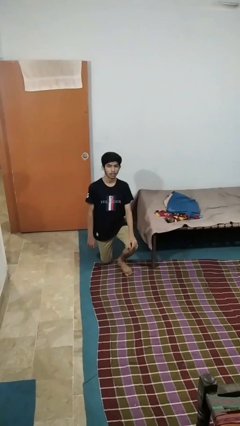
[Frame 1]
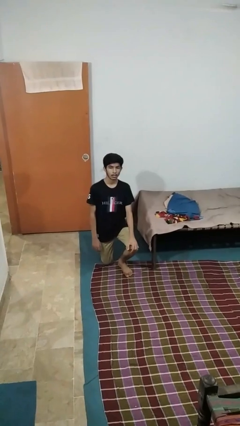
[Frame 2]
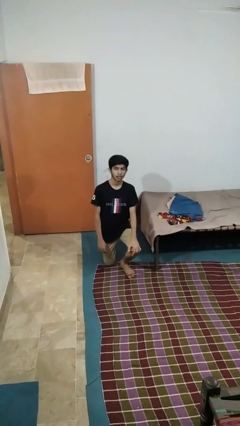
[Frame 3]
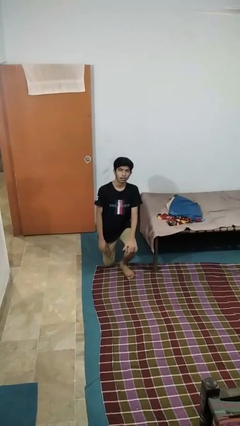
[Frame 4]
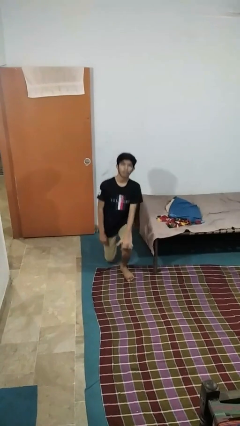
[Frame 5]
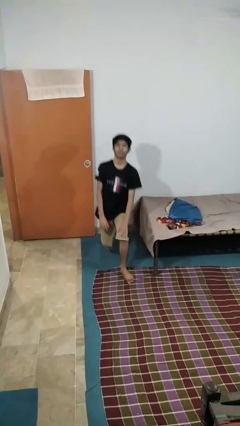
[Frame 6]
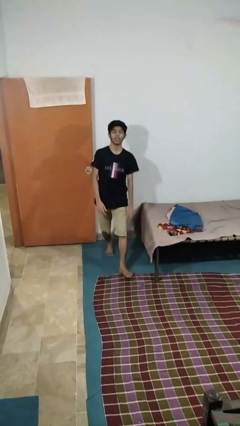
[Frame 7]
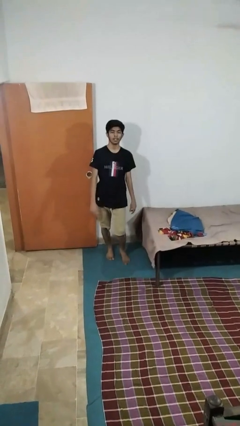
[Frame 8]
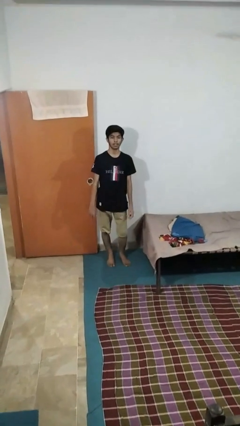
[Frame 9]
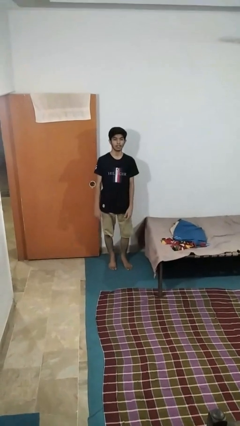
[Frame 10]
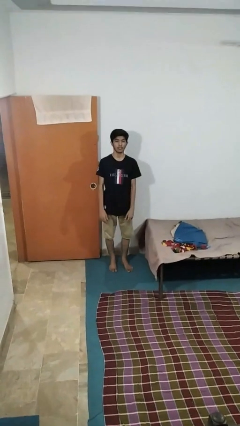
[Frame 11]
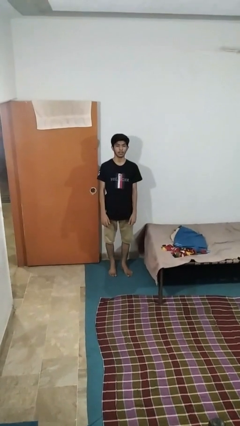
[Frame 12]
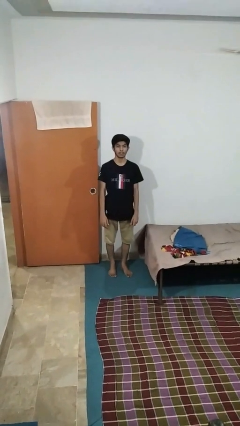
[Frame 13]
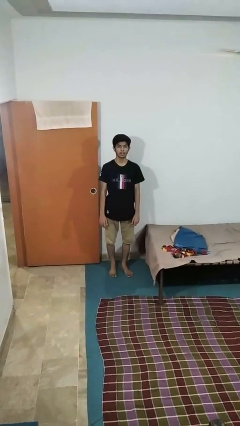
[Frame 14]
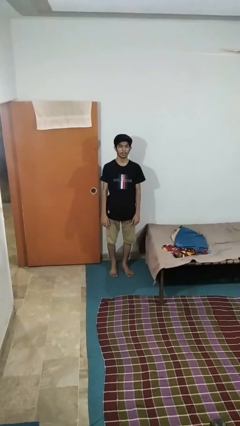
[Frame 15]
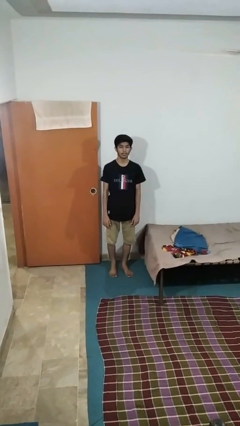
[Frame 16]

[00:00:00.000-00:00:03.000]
person stands up from floor

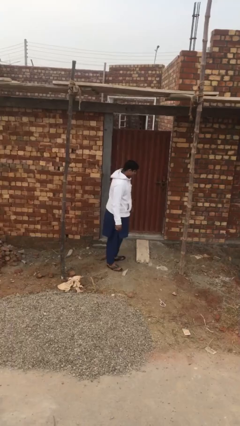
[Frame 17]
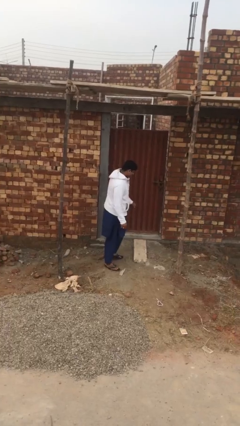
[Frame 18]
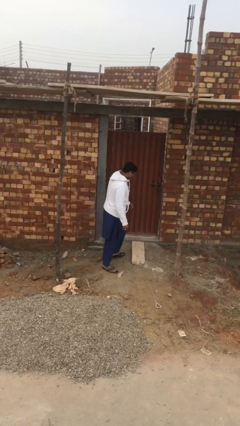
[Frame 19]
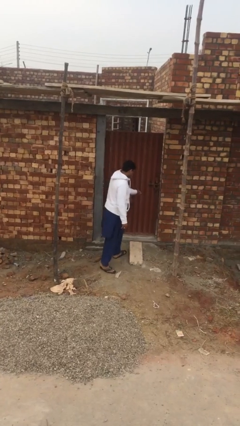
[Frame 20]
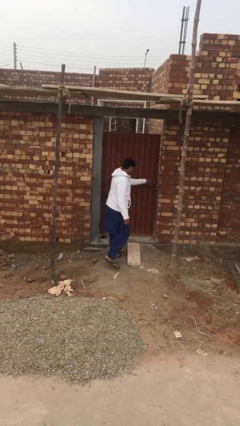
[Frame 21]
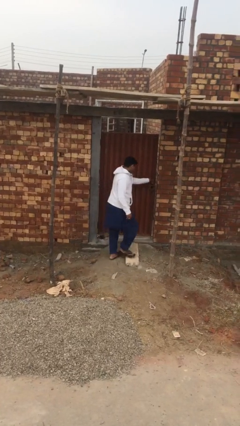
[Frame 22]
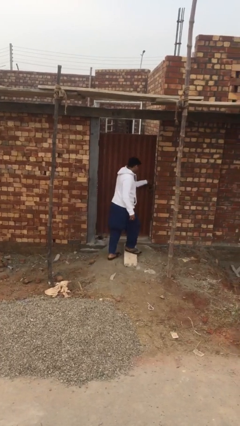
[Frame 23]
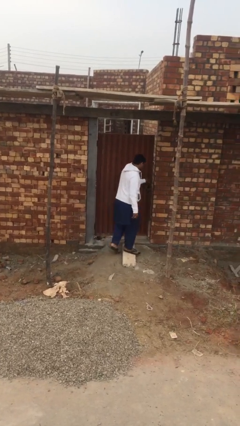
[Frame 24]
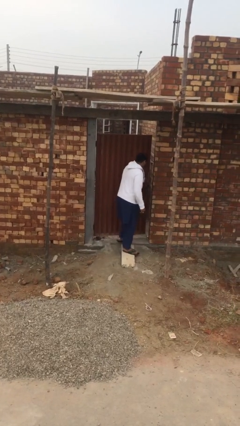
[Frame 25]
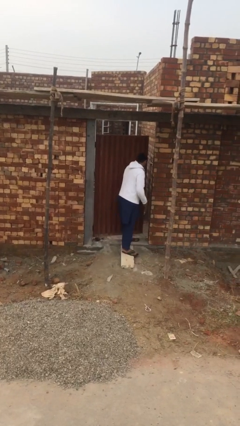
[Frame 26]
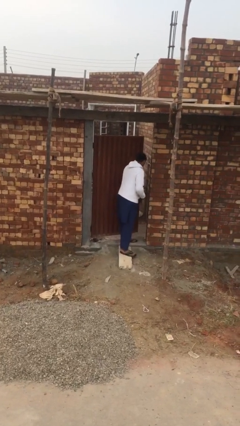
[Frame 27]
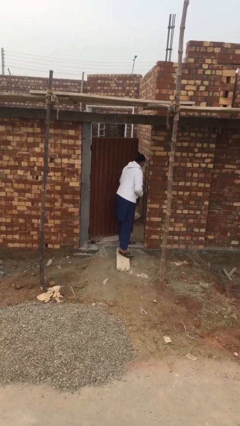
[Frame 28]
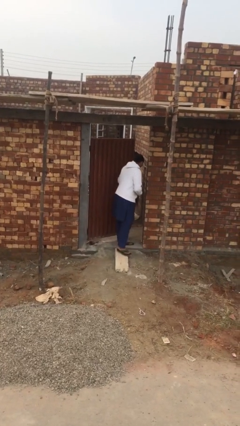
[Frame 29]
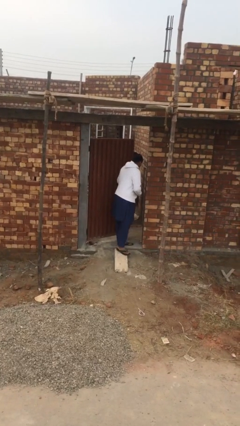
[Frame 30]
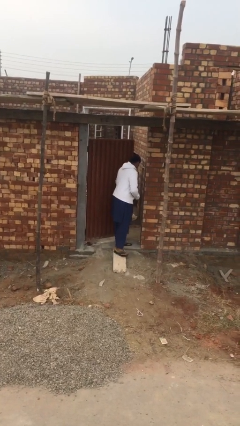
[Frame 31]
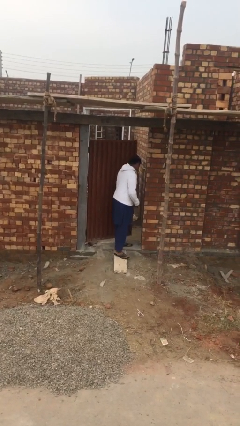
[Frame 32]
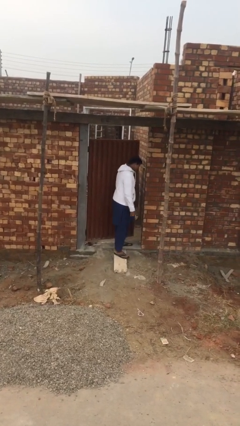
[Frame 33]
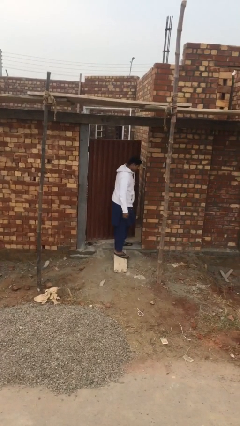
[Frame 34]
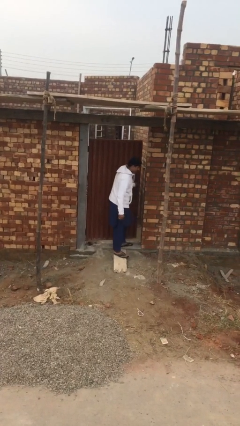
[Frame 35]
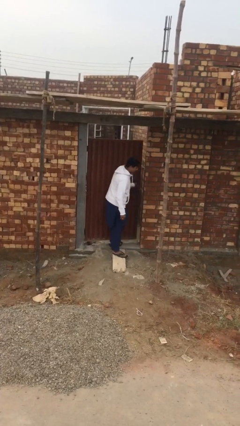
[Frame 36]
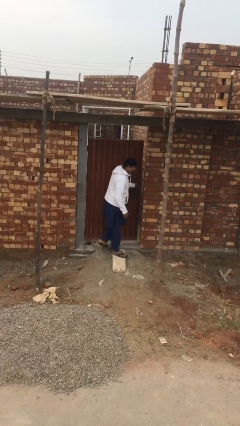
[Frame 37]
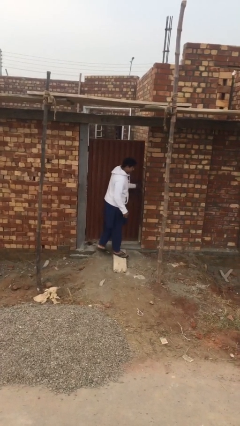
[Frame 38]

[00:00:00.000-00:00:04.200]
person opens facility door

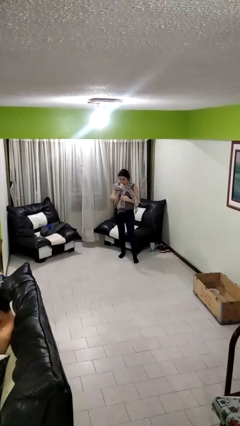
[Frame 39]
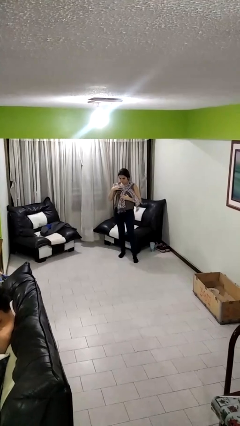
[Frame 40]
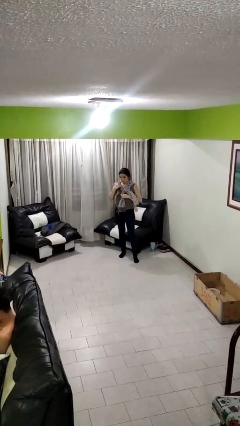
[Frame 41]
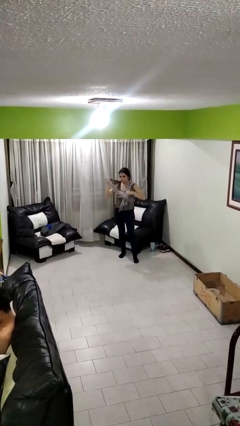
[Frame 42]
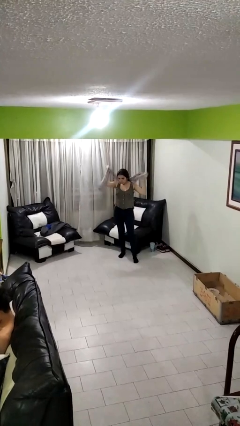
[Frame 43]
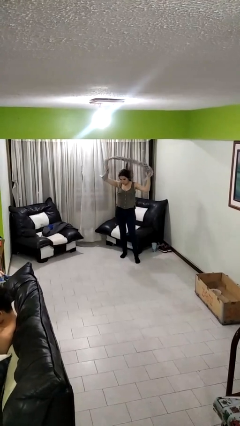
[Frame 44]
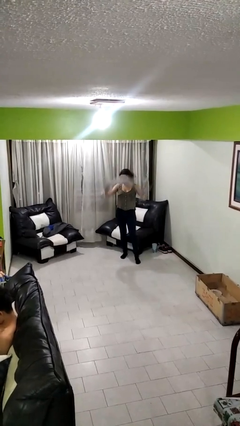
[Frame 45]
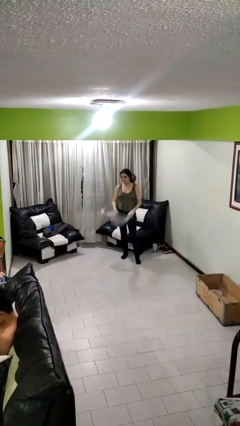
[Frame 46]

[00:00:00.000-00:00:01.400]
person takes off scarf

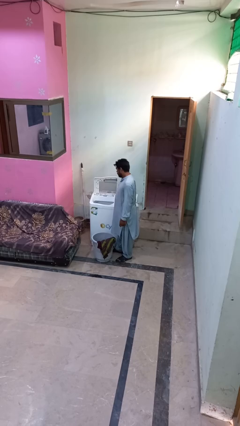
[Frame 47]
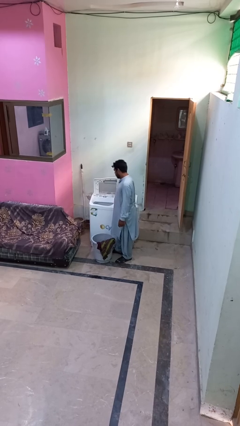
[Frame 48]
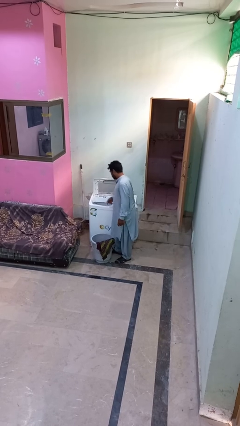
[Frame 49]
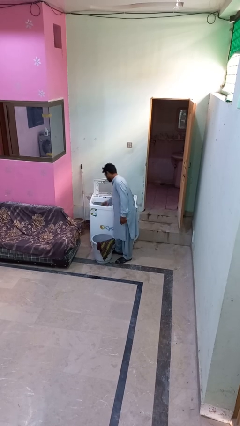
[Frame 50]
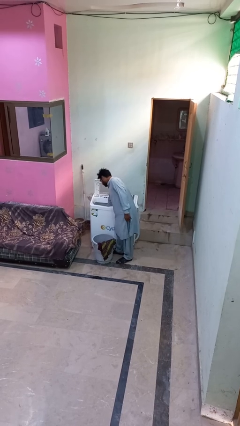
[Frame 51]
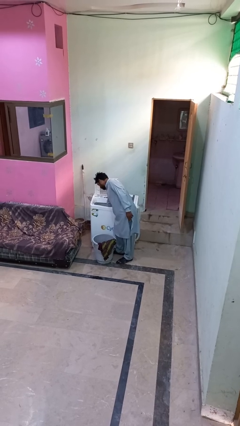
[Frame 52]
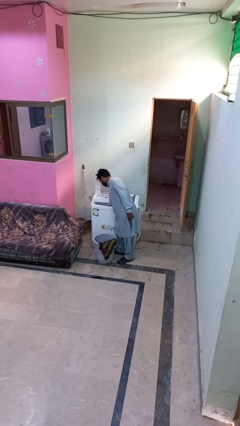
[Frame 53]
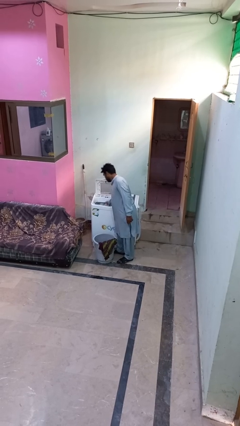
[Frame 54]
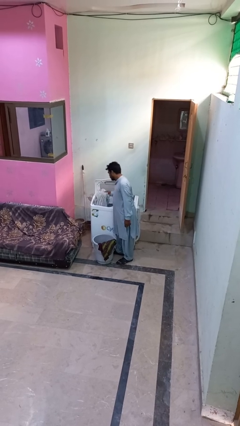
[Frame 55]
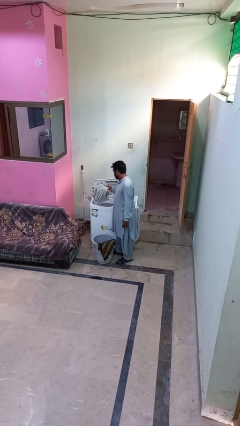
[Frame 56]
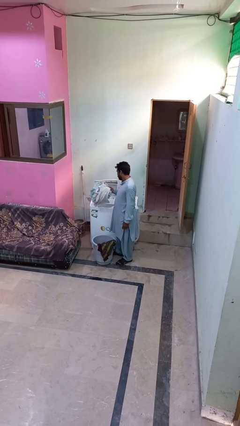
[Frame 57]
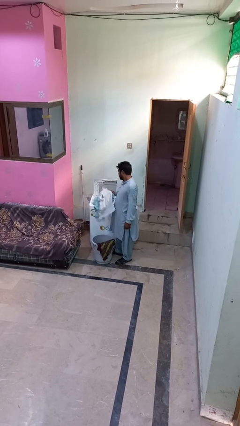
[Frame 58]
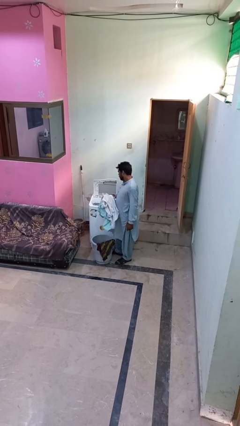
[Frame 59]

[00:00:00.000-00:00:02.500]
person unloads clotheswasher

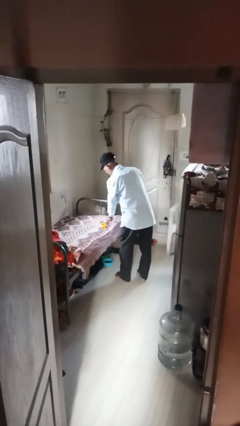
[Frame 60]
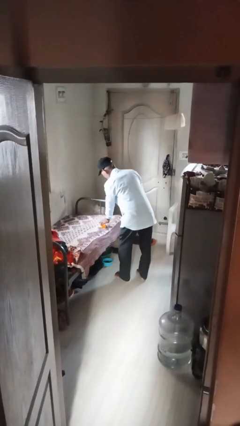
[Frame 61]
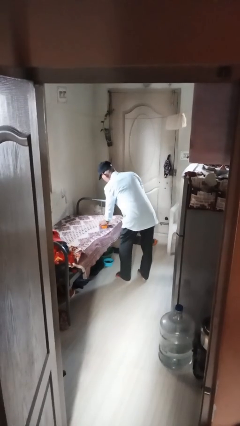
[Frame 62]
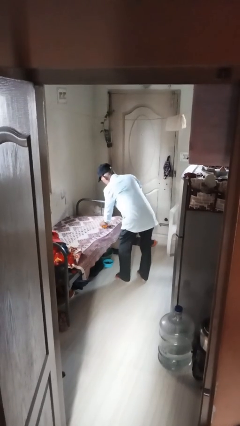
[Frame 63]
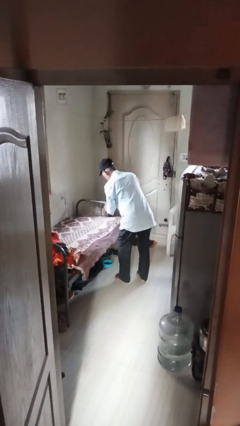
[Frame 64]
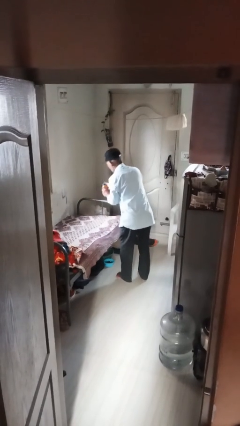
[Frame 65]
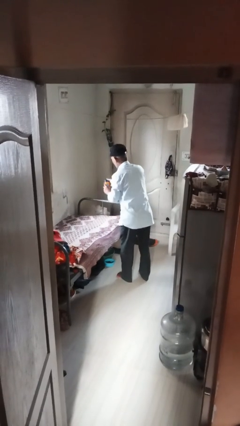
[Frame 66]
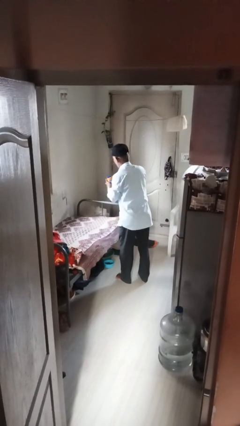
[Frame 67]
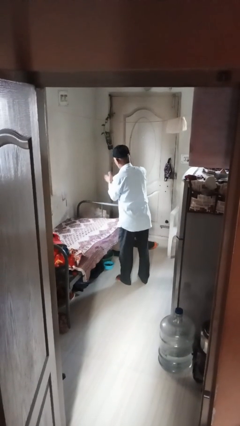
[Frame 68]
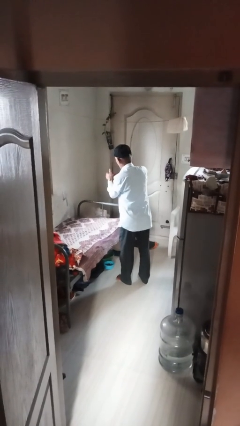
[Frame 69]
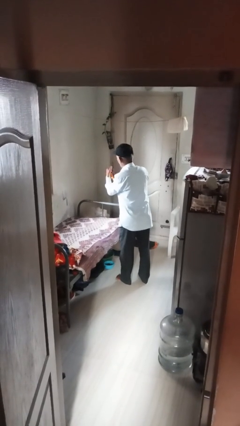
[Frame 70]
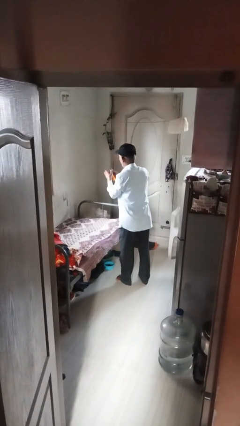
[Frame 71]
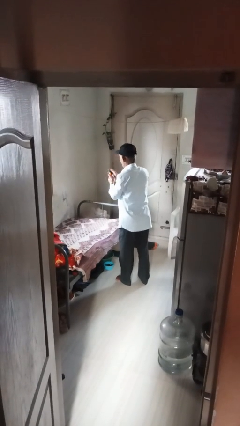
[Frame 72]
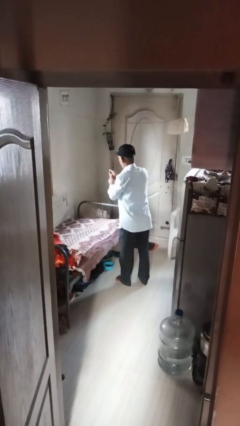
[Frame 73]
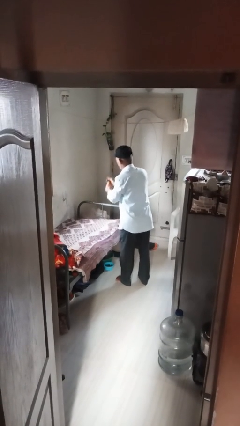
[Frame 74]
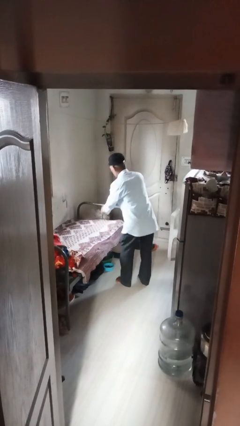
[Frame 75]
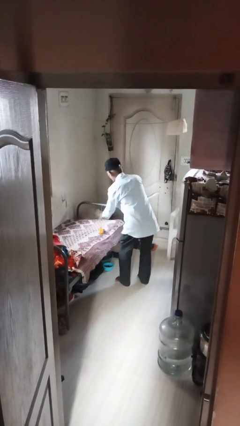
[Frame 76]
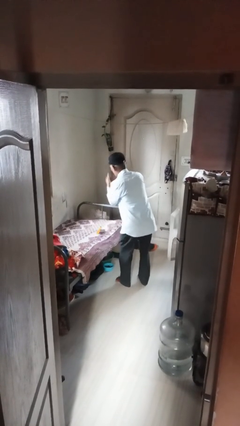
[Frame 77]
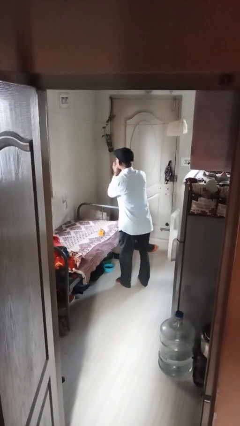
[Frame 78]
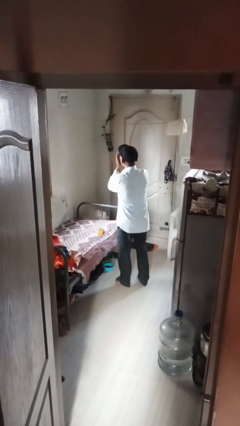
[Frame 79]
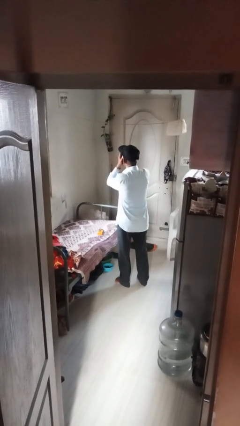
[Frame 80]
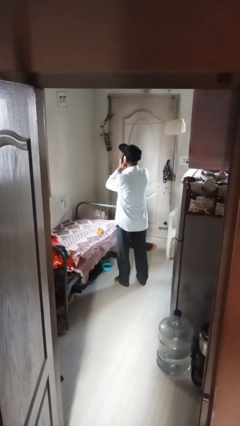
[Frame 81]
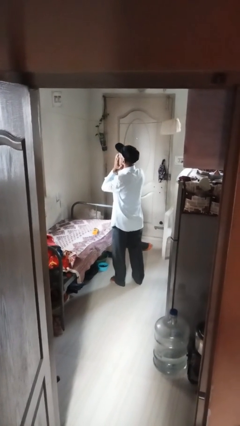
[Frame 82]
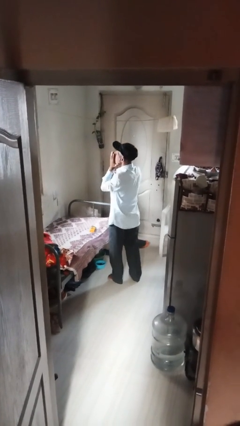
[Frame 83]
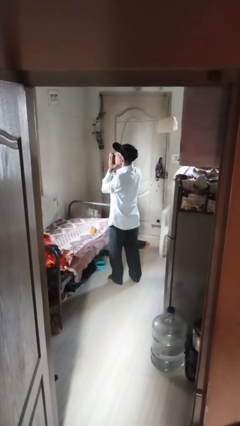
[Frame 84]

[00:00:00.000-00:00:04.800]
person applies sunscreen

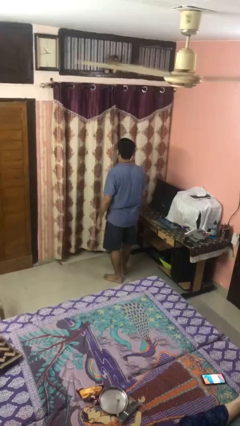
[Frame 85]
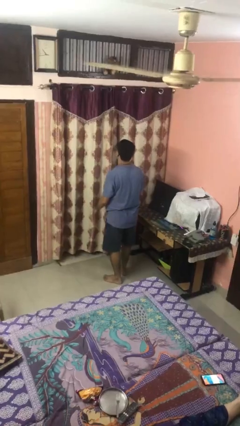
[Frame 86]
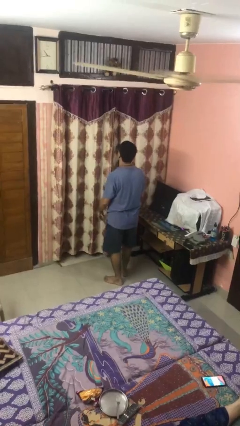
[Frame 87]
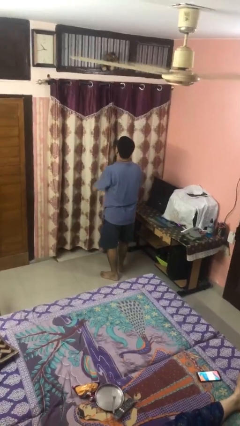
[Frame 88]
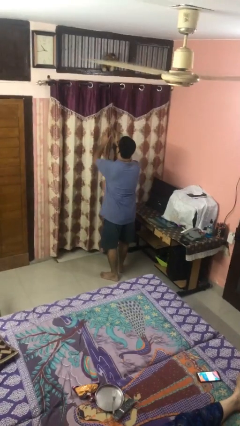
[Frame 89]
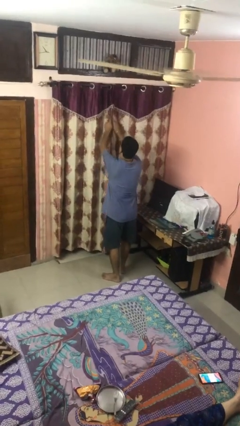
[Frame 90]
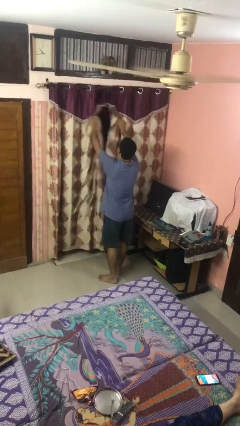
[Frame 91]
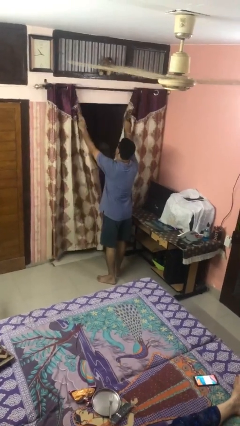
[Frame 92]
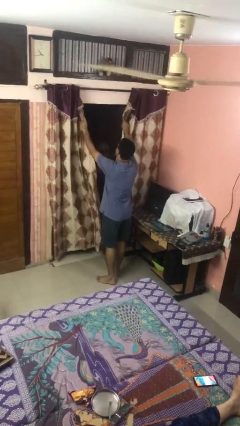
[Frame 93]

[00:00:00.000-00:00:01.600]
person opens curtains
